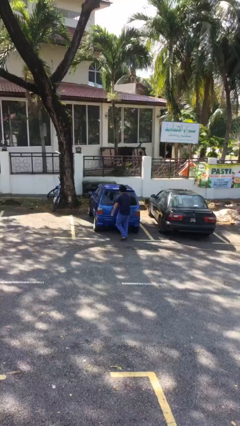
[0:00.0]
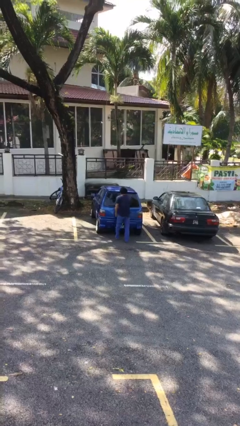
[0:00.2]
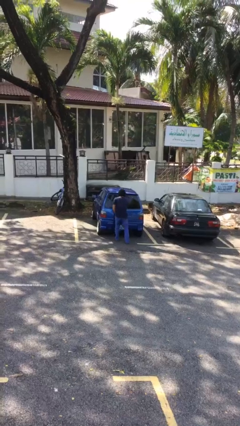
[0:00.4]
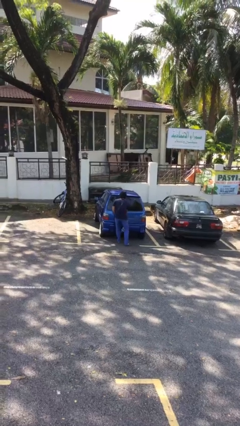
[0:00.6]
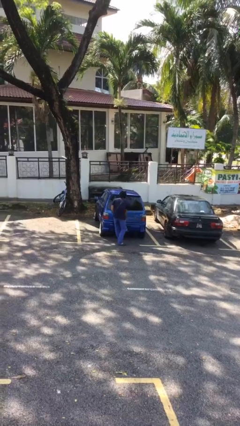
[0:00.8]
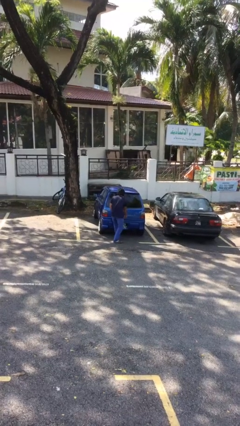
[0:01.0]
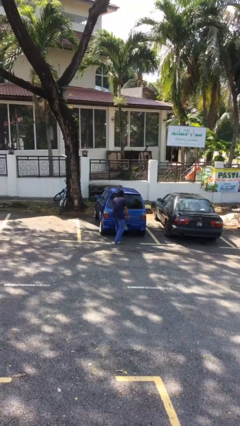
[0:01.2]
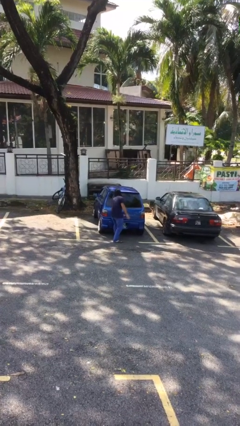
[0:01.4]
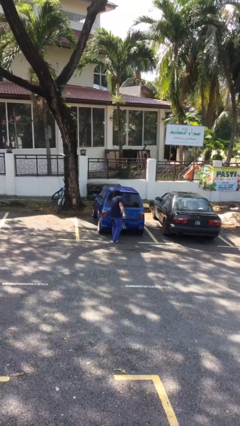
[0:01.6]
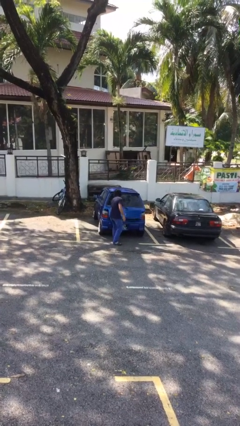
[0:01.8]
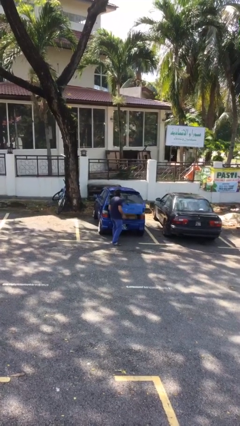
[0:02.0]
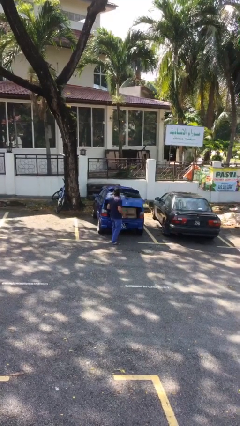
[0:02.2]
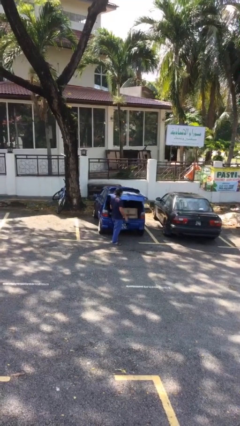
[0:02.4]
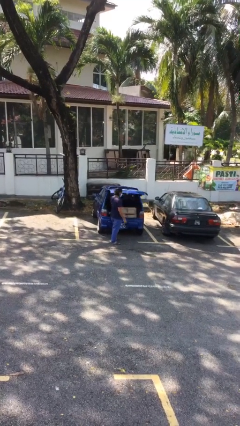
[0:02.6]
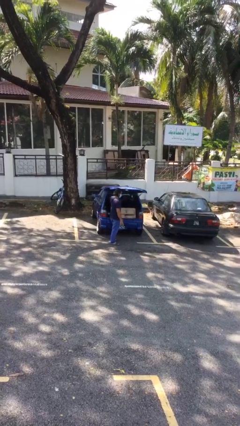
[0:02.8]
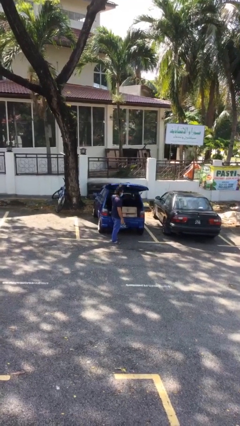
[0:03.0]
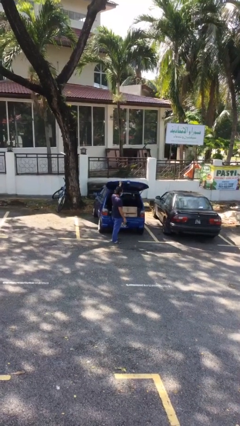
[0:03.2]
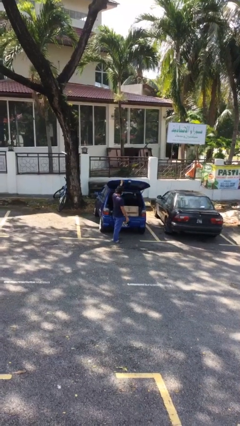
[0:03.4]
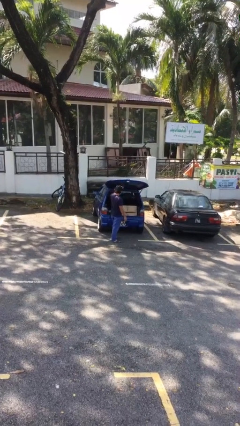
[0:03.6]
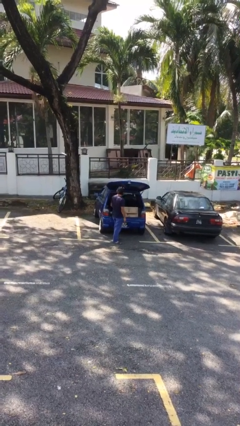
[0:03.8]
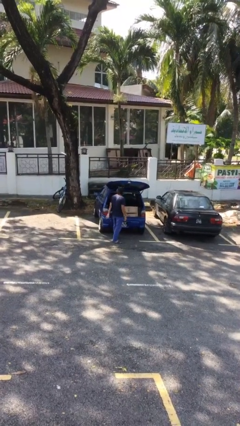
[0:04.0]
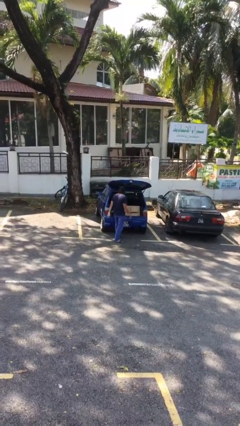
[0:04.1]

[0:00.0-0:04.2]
person opens car trunk

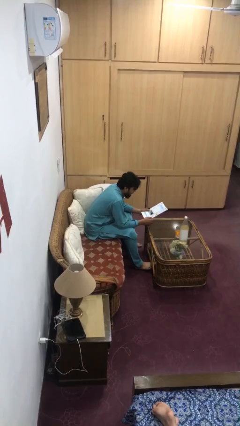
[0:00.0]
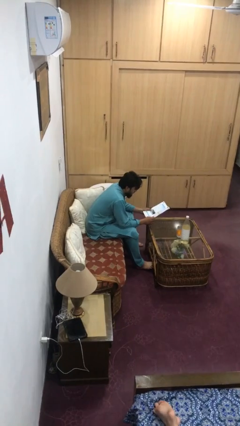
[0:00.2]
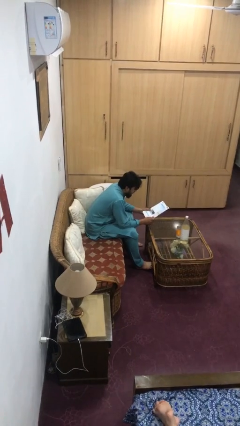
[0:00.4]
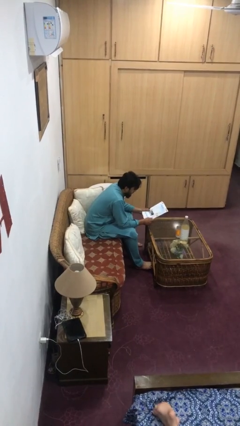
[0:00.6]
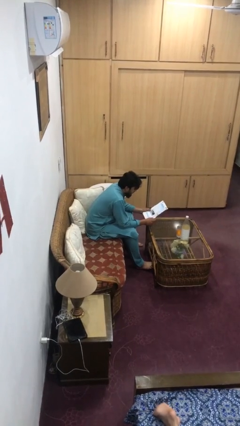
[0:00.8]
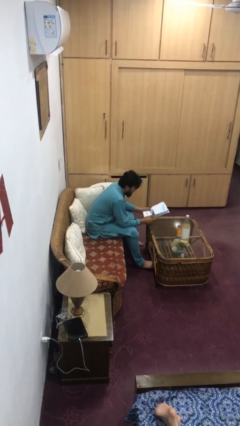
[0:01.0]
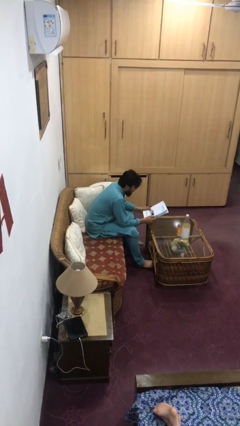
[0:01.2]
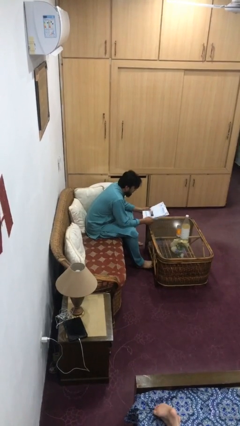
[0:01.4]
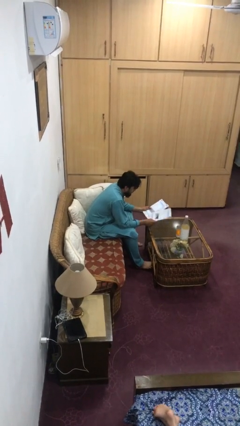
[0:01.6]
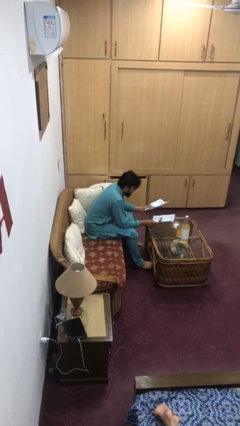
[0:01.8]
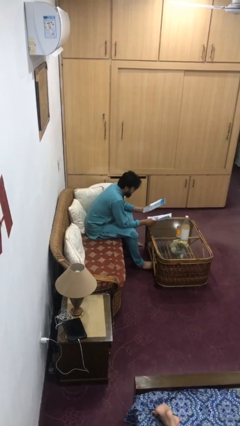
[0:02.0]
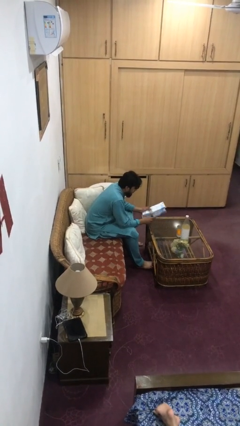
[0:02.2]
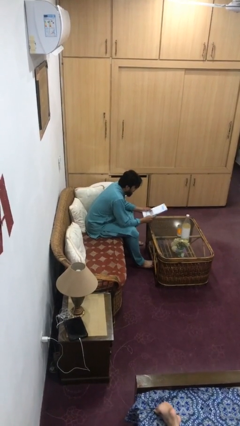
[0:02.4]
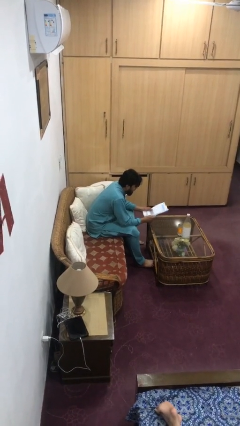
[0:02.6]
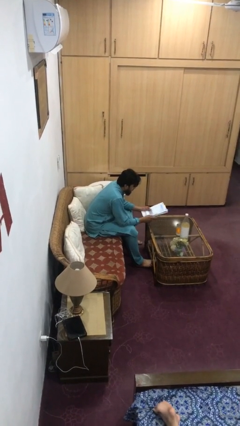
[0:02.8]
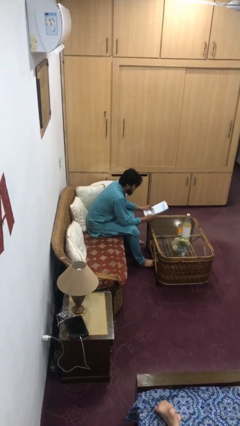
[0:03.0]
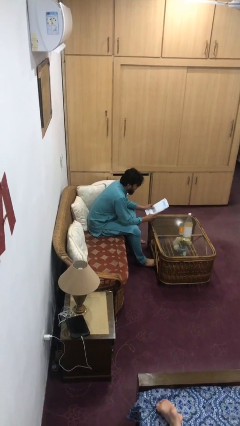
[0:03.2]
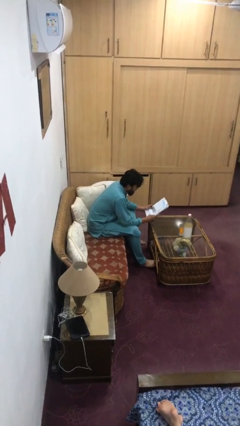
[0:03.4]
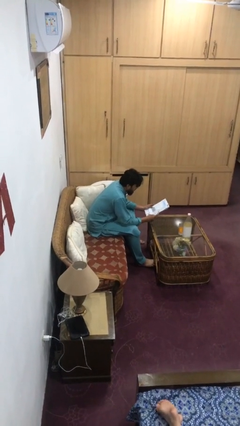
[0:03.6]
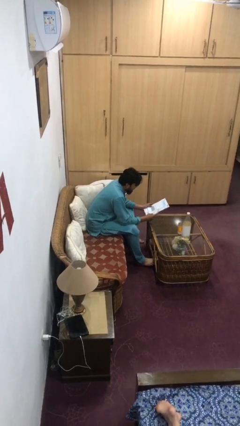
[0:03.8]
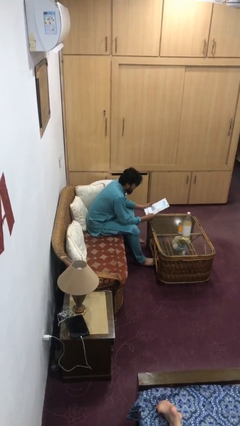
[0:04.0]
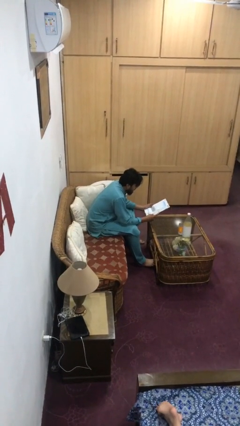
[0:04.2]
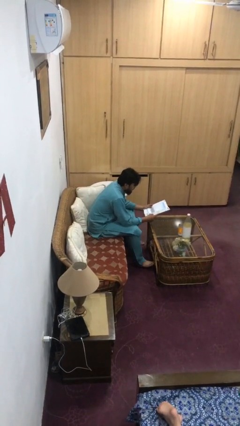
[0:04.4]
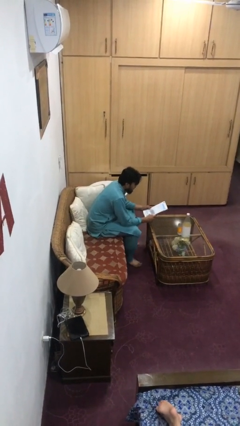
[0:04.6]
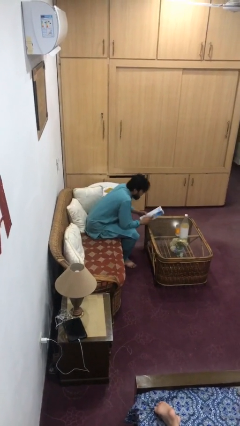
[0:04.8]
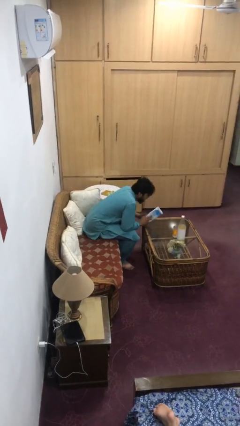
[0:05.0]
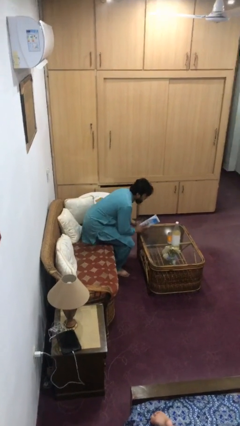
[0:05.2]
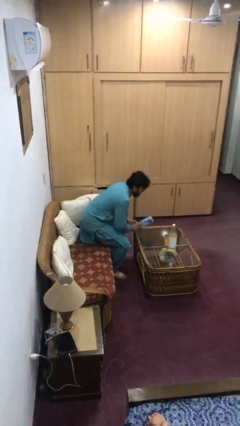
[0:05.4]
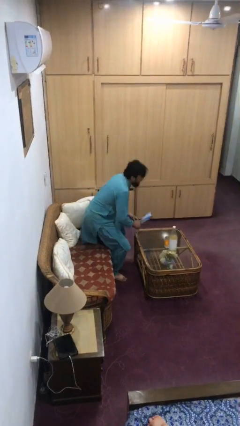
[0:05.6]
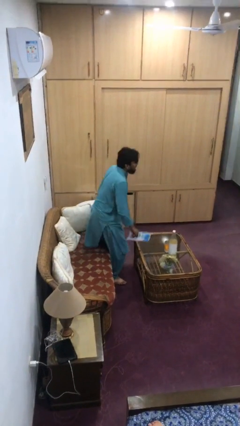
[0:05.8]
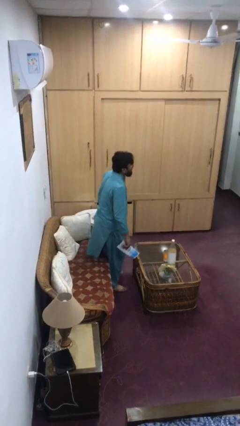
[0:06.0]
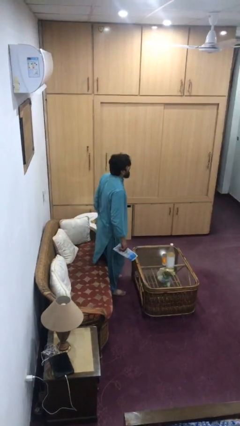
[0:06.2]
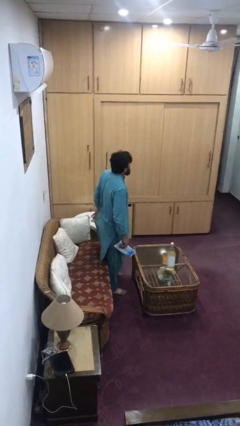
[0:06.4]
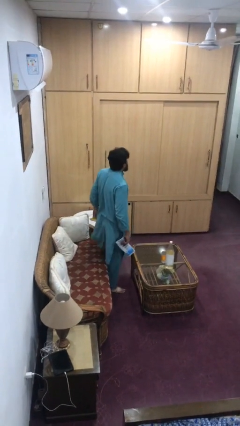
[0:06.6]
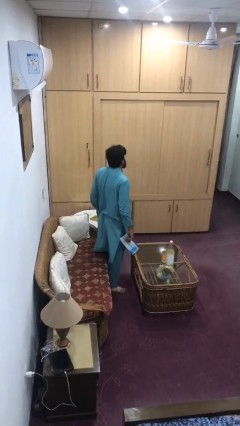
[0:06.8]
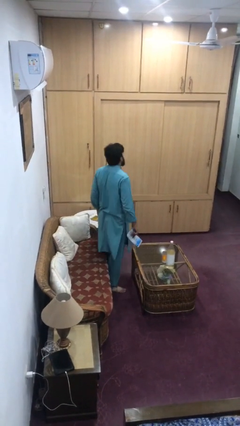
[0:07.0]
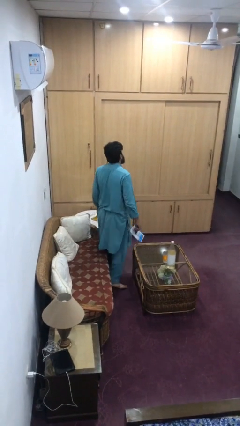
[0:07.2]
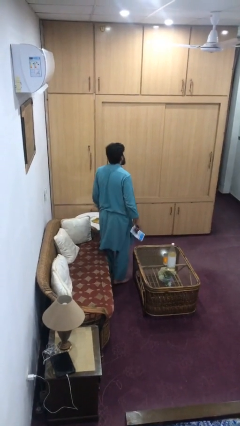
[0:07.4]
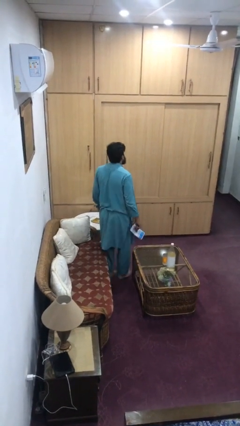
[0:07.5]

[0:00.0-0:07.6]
person stands up

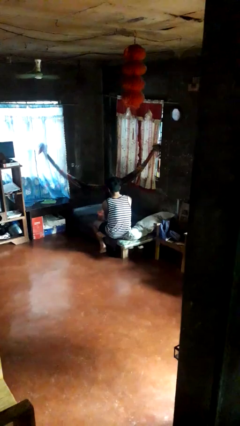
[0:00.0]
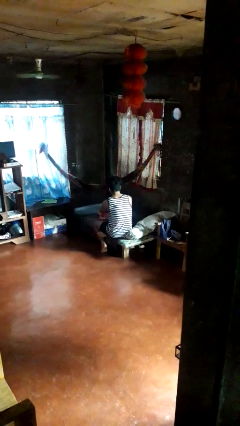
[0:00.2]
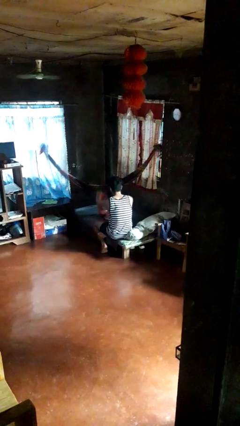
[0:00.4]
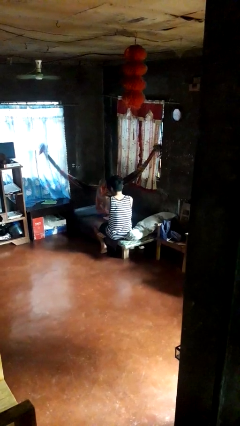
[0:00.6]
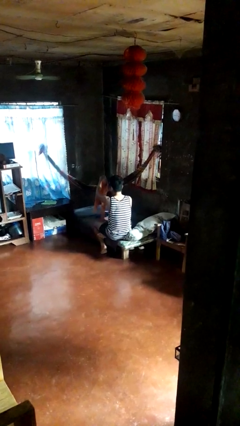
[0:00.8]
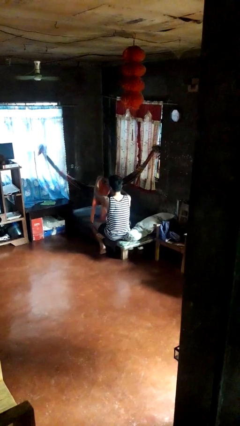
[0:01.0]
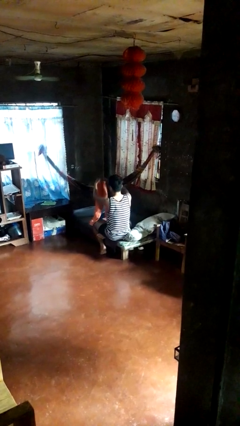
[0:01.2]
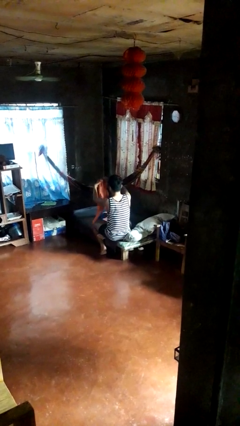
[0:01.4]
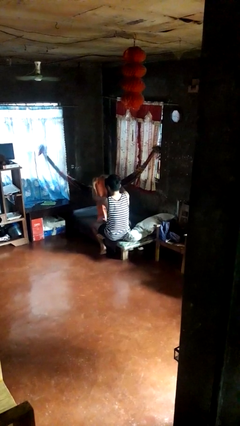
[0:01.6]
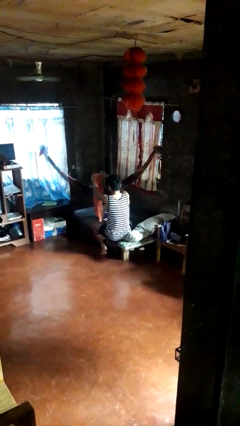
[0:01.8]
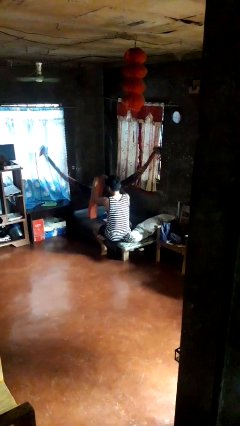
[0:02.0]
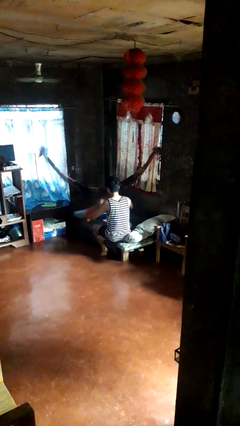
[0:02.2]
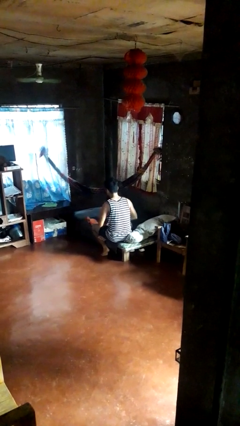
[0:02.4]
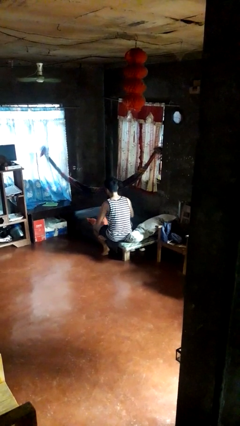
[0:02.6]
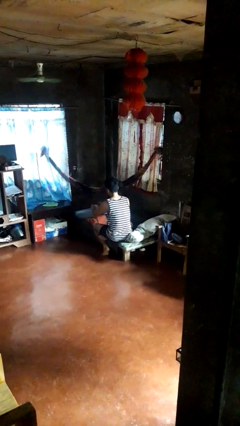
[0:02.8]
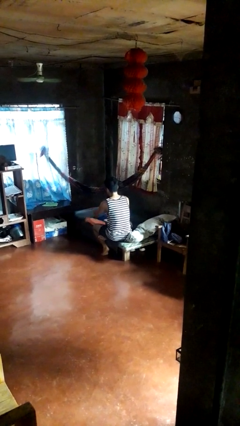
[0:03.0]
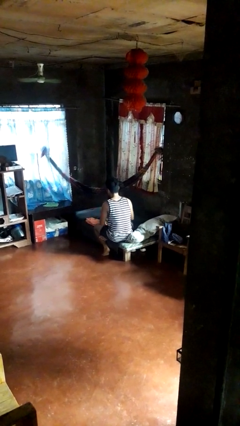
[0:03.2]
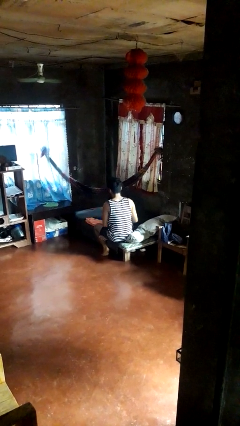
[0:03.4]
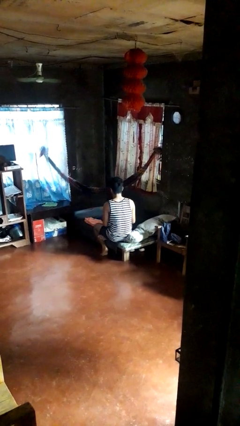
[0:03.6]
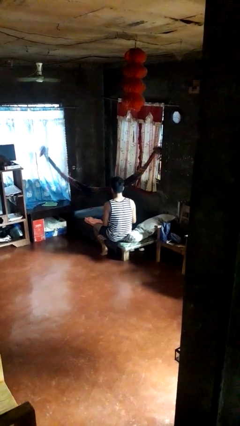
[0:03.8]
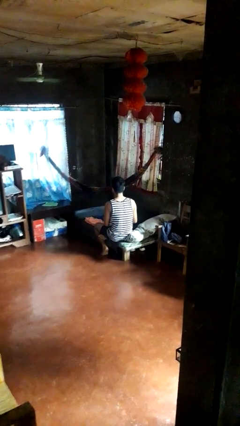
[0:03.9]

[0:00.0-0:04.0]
person folds pants

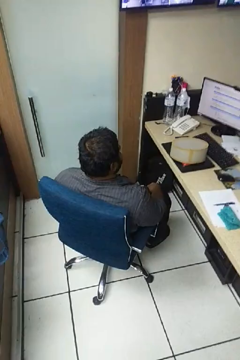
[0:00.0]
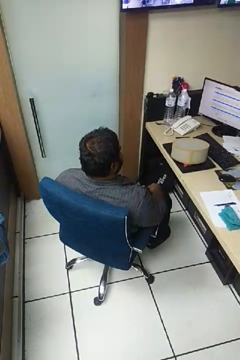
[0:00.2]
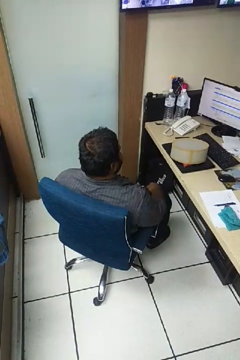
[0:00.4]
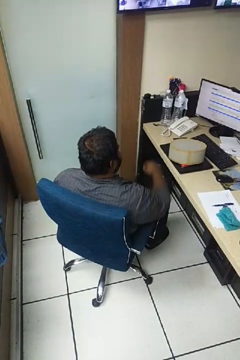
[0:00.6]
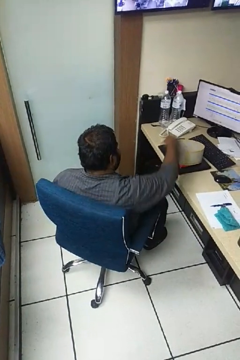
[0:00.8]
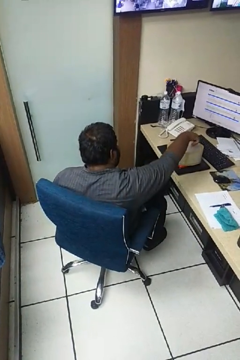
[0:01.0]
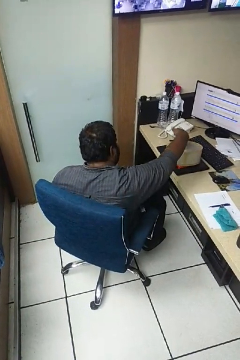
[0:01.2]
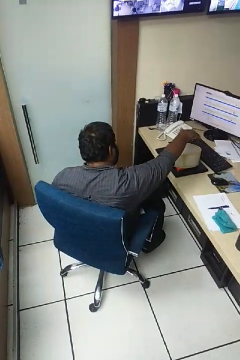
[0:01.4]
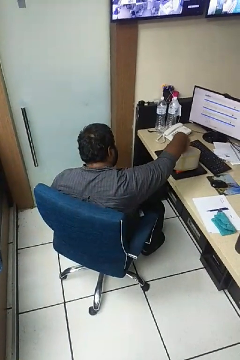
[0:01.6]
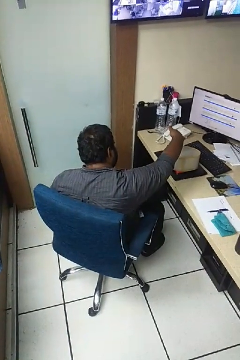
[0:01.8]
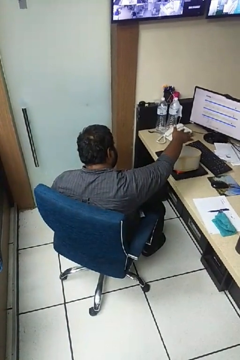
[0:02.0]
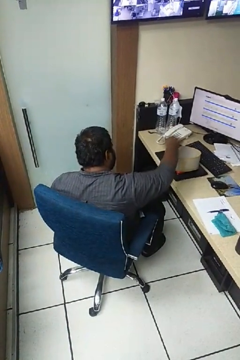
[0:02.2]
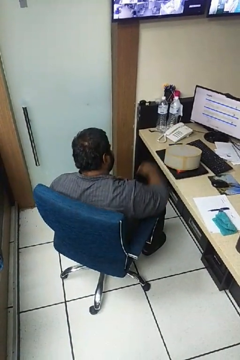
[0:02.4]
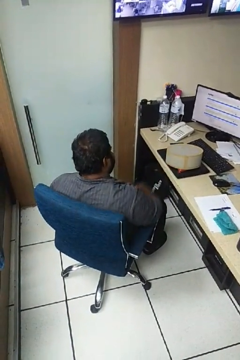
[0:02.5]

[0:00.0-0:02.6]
person waves hand over object
